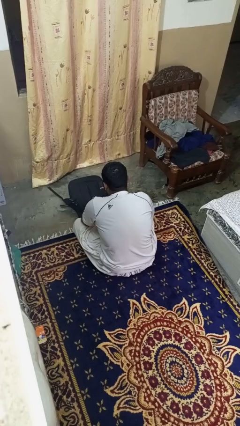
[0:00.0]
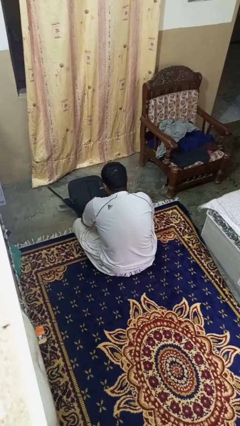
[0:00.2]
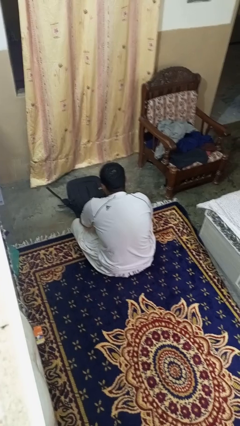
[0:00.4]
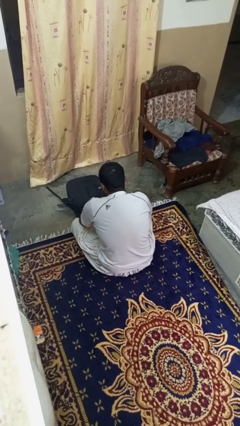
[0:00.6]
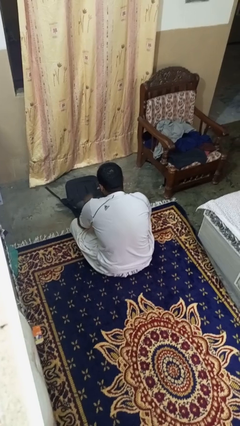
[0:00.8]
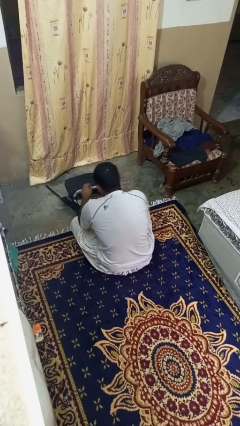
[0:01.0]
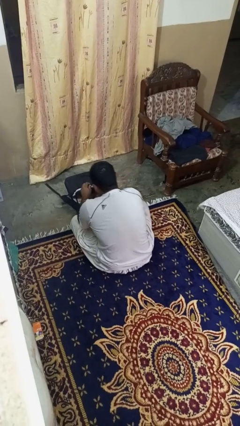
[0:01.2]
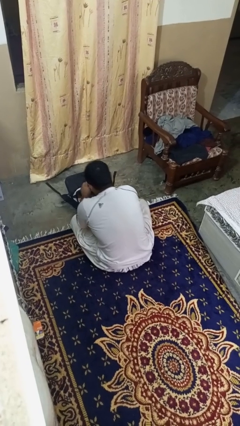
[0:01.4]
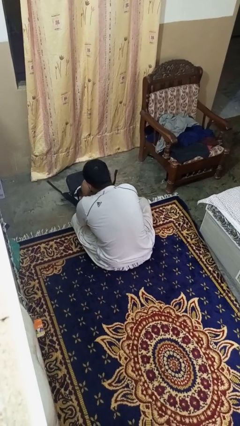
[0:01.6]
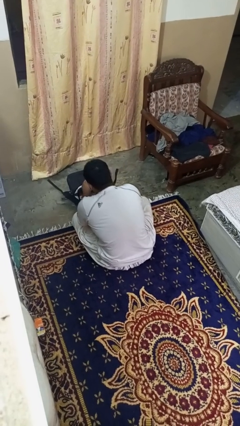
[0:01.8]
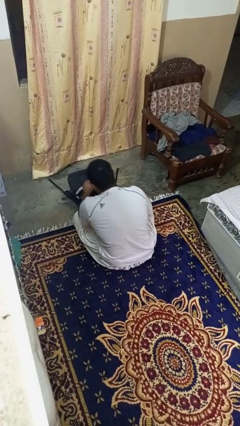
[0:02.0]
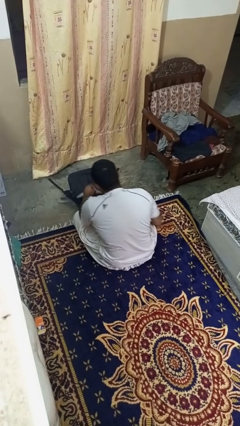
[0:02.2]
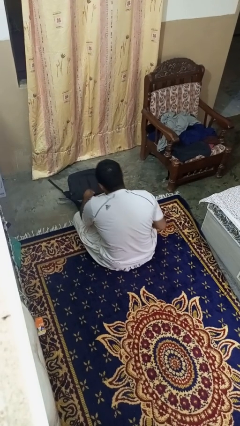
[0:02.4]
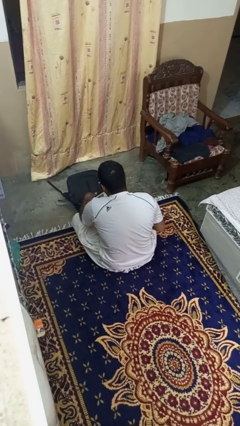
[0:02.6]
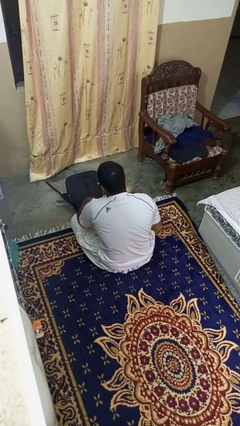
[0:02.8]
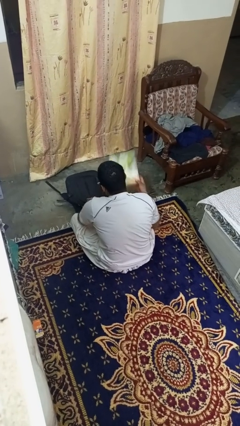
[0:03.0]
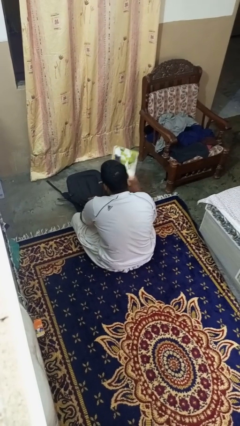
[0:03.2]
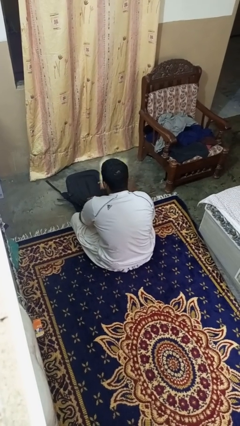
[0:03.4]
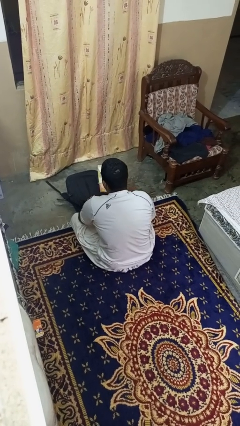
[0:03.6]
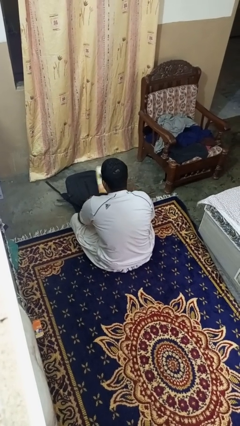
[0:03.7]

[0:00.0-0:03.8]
person takes object from bag

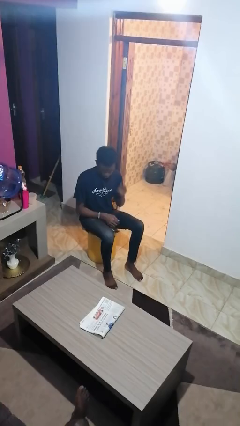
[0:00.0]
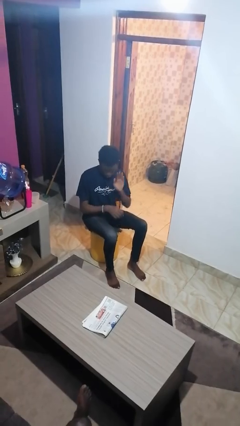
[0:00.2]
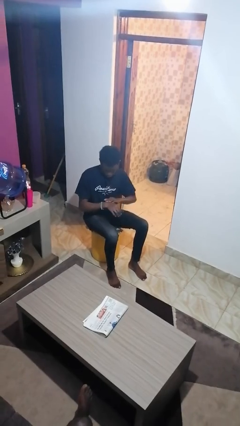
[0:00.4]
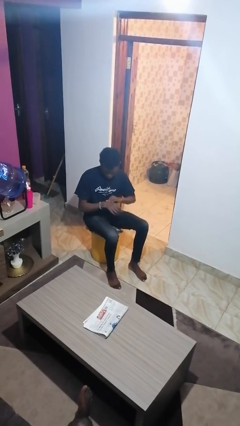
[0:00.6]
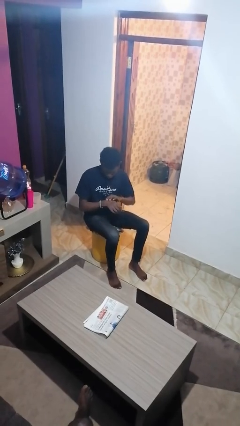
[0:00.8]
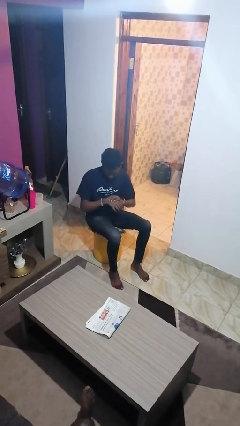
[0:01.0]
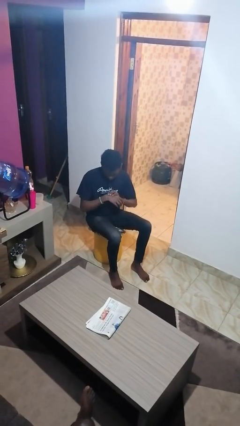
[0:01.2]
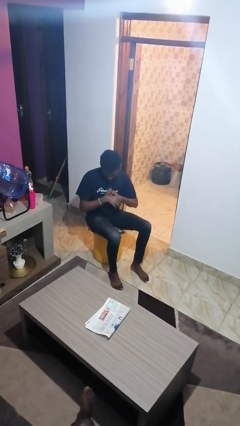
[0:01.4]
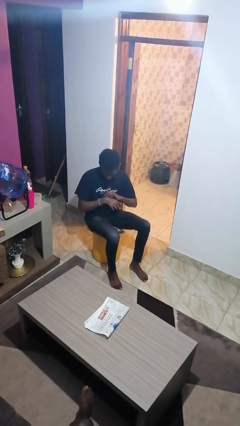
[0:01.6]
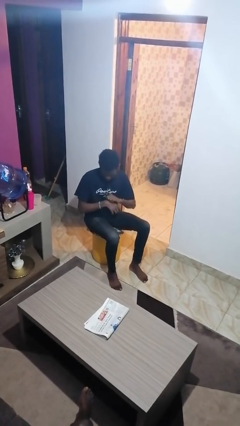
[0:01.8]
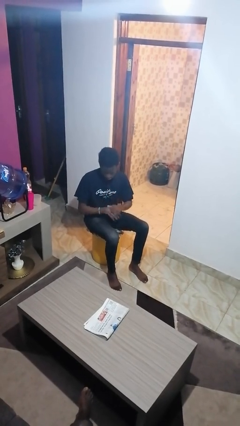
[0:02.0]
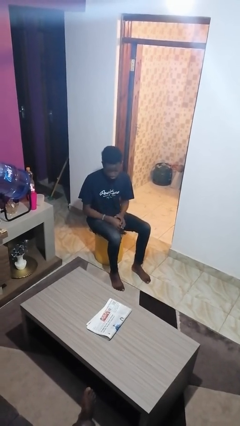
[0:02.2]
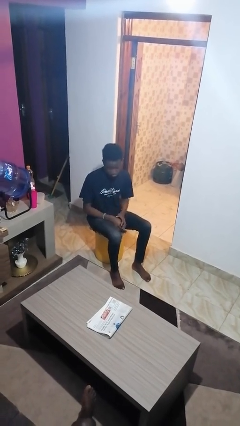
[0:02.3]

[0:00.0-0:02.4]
person swats bug

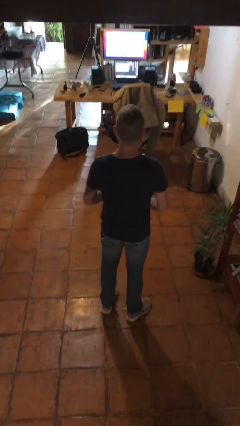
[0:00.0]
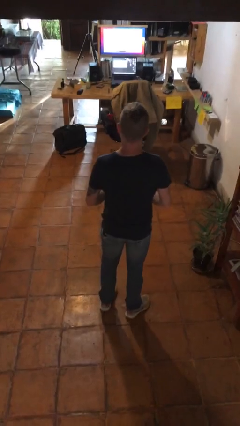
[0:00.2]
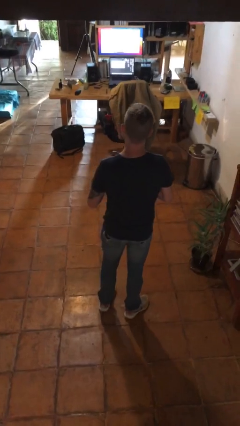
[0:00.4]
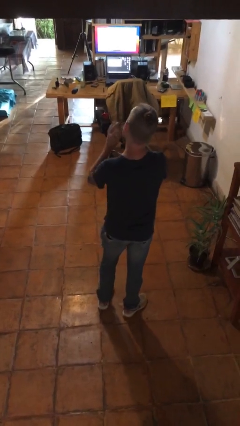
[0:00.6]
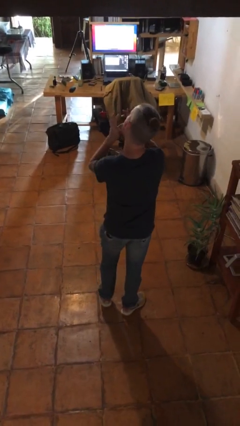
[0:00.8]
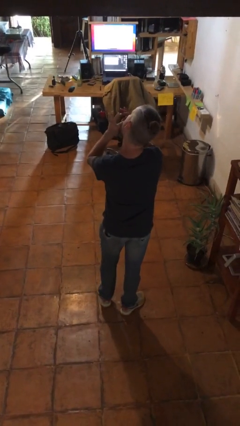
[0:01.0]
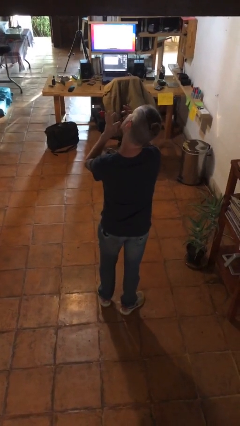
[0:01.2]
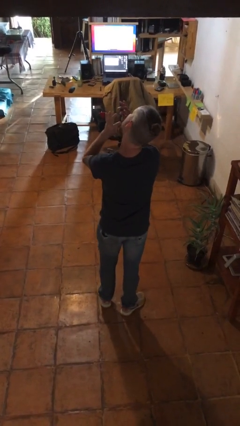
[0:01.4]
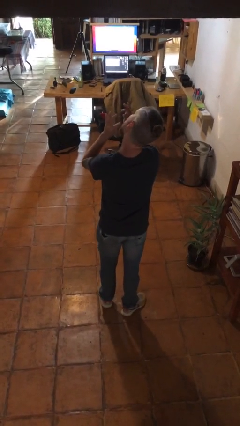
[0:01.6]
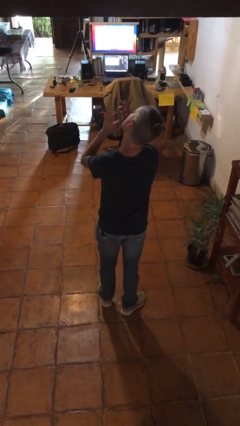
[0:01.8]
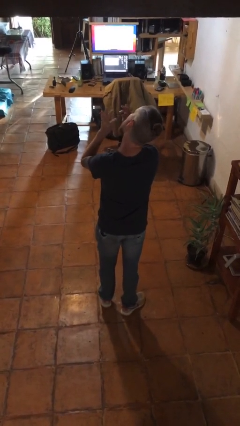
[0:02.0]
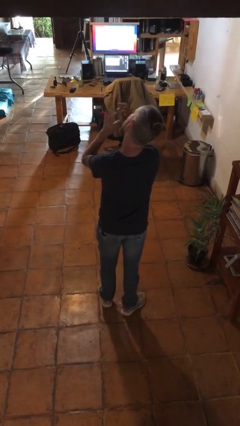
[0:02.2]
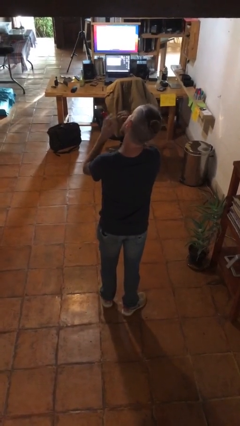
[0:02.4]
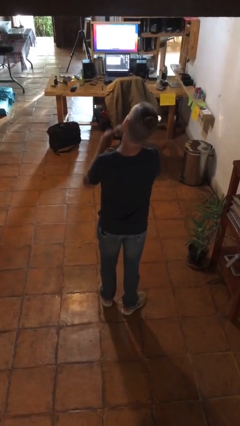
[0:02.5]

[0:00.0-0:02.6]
person flosses

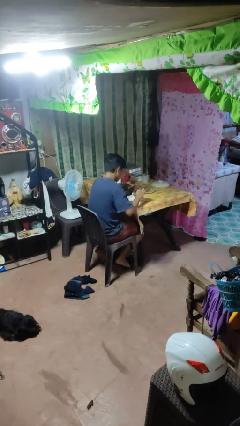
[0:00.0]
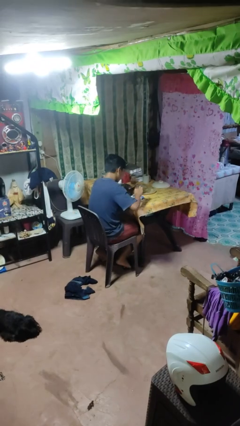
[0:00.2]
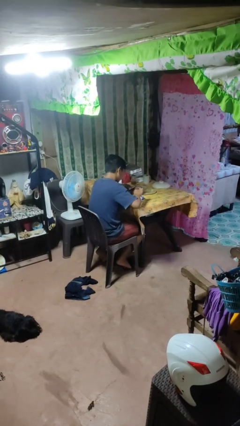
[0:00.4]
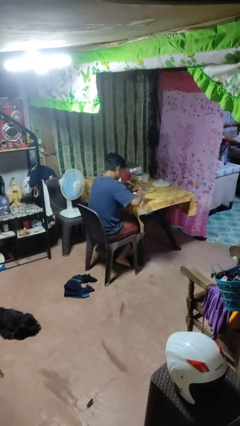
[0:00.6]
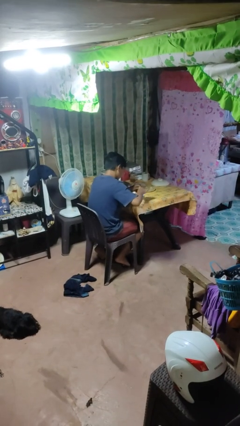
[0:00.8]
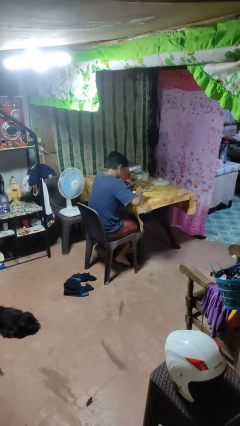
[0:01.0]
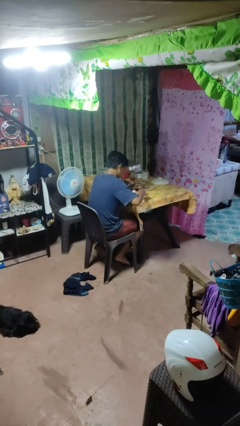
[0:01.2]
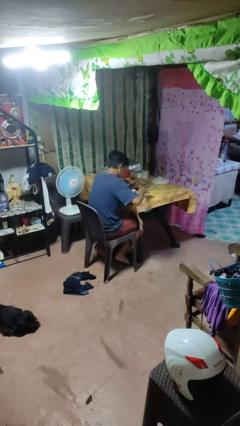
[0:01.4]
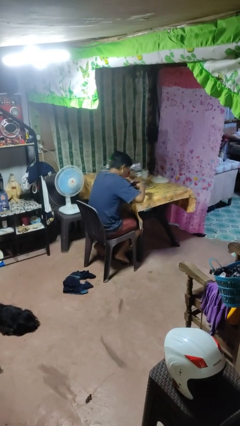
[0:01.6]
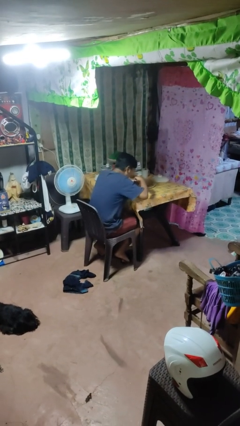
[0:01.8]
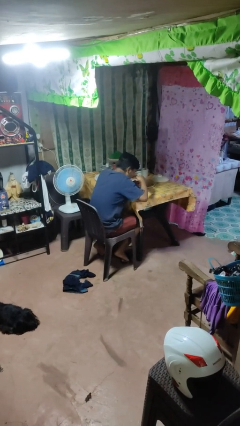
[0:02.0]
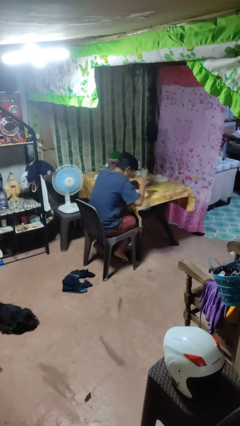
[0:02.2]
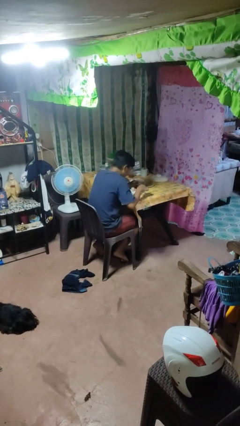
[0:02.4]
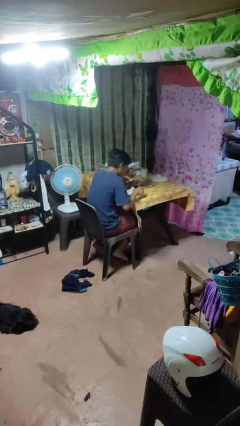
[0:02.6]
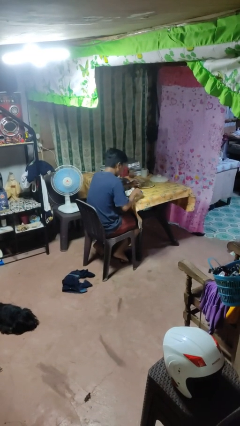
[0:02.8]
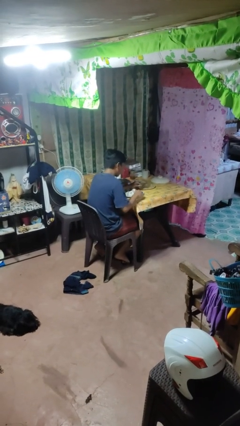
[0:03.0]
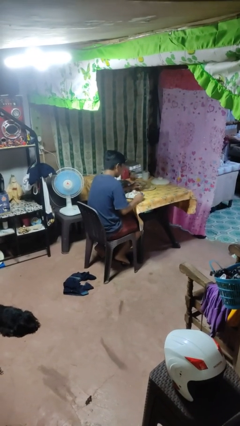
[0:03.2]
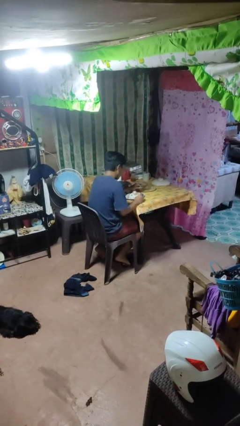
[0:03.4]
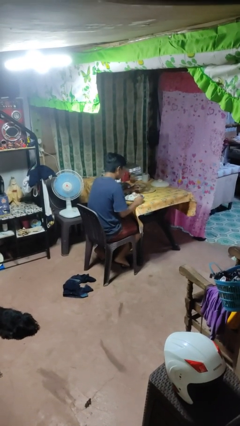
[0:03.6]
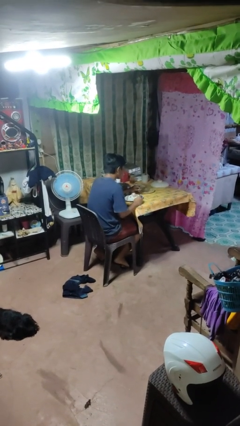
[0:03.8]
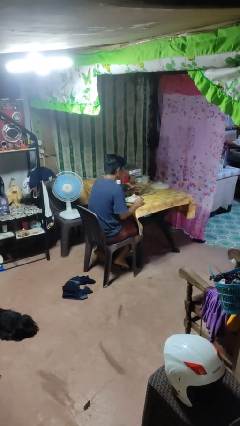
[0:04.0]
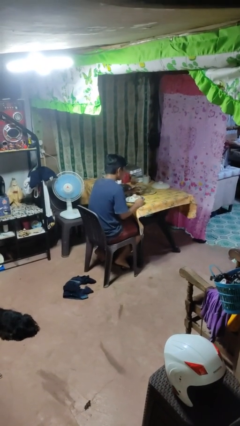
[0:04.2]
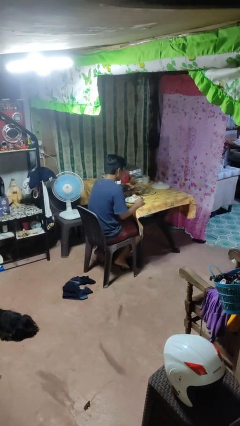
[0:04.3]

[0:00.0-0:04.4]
person eats with utensil

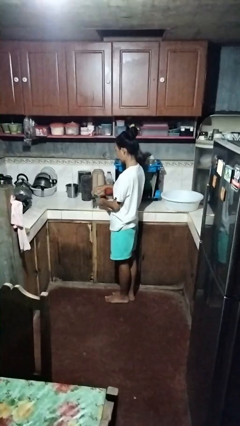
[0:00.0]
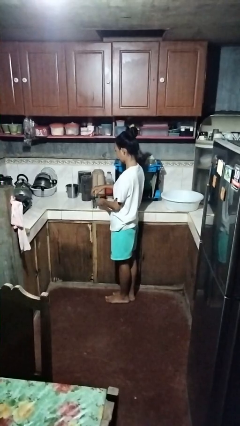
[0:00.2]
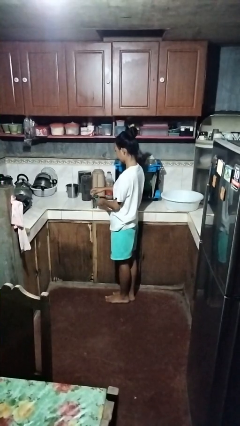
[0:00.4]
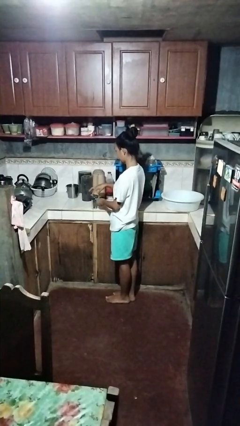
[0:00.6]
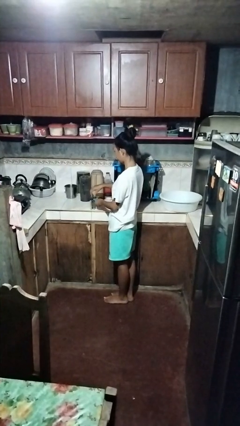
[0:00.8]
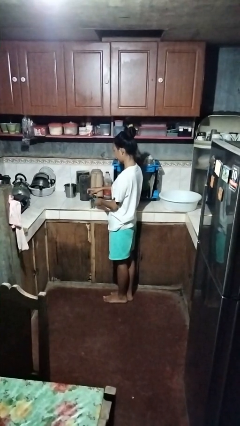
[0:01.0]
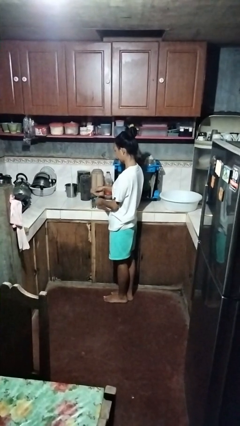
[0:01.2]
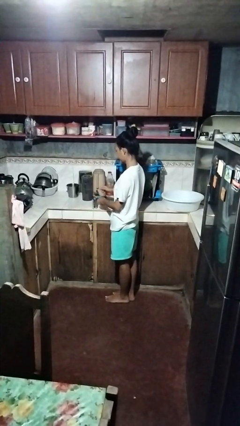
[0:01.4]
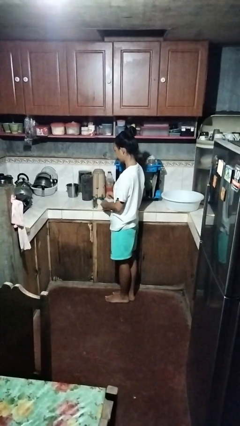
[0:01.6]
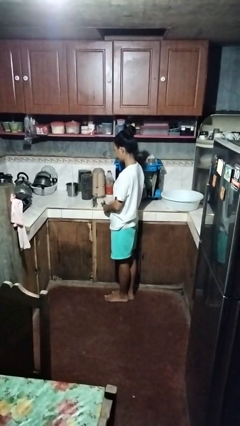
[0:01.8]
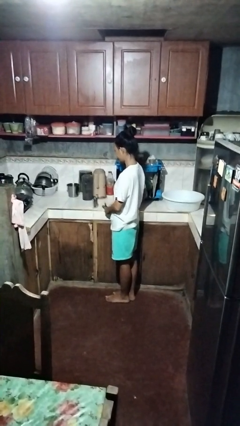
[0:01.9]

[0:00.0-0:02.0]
person opens can with can opener

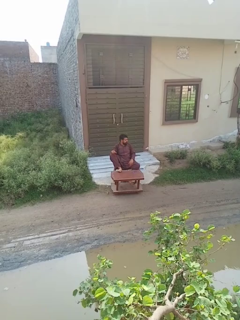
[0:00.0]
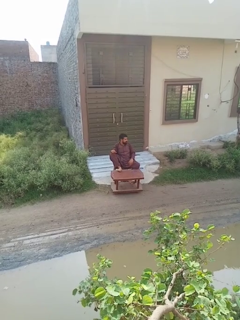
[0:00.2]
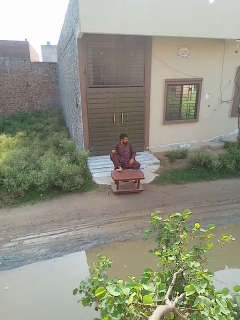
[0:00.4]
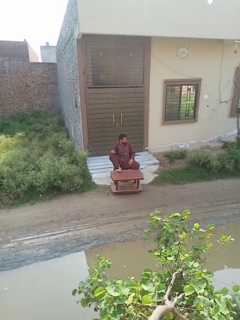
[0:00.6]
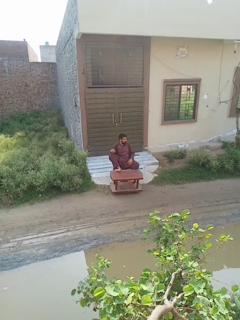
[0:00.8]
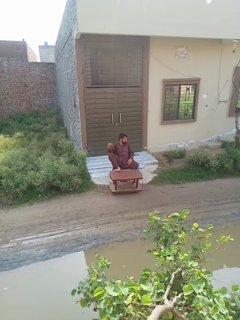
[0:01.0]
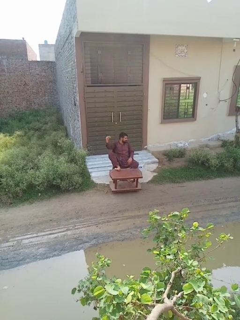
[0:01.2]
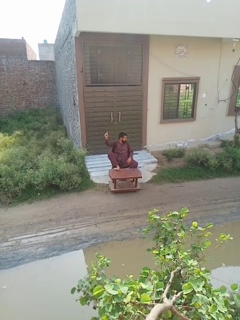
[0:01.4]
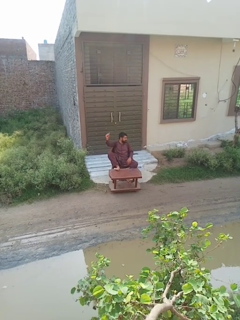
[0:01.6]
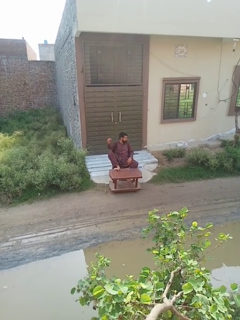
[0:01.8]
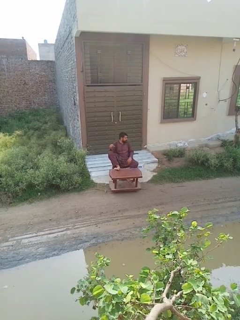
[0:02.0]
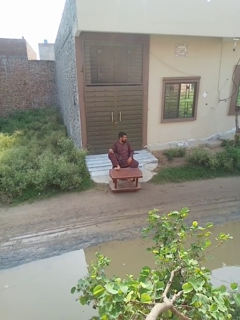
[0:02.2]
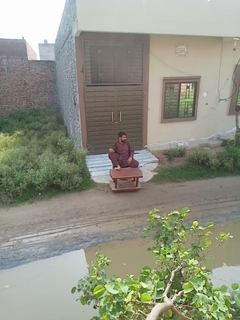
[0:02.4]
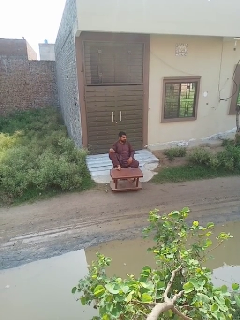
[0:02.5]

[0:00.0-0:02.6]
person snaps fingers
